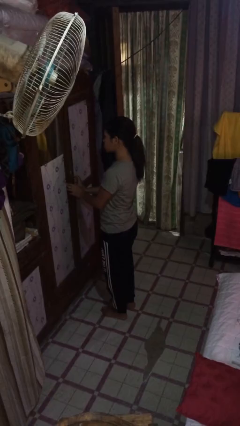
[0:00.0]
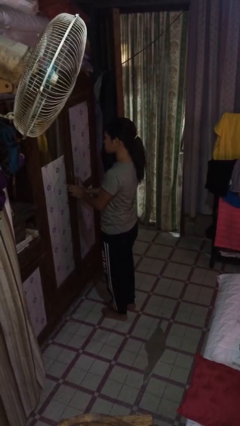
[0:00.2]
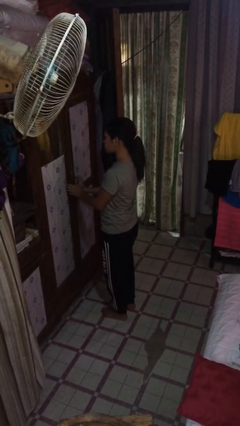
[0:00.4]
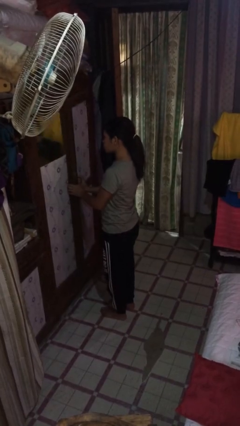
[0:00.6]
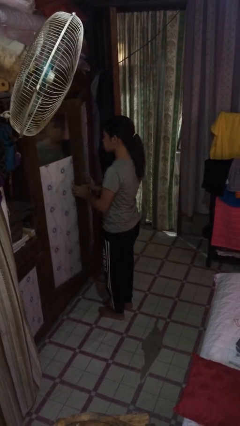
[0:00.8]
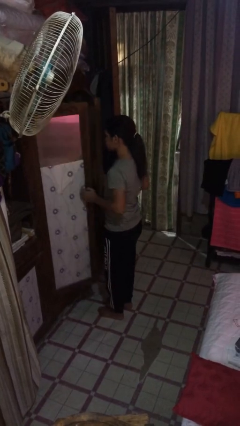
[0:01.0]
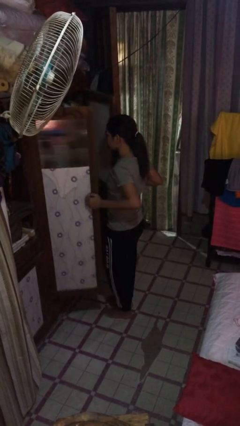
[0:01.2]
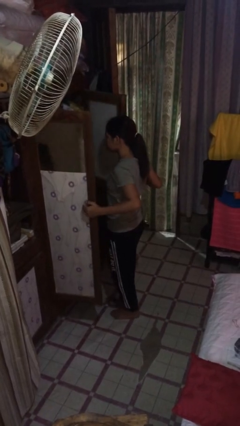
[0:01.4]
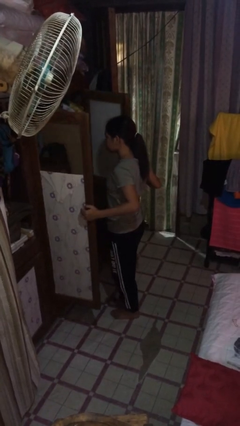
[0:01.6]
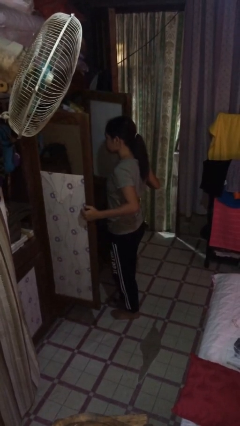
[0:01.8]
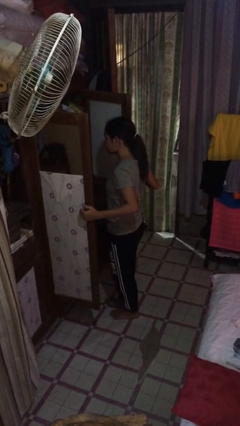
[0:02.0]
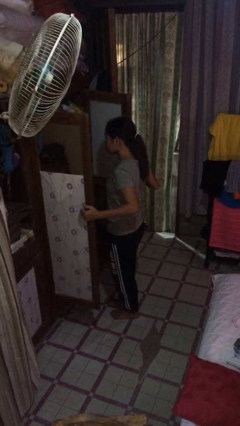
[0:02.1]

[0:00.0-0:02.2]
person opens closet door

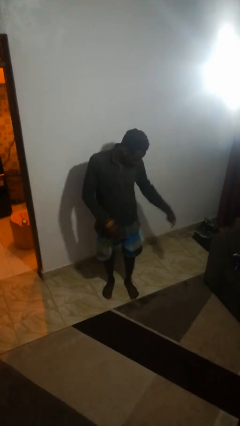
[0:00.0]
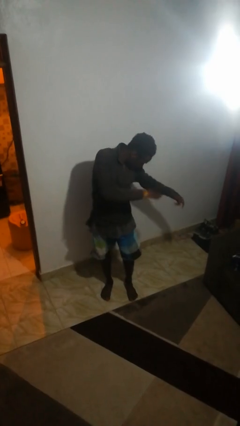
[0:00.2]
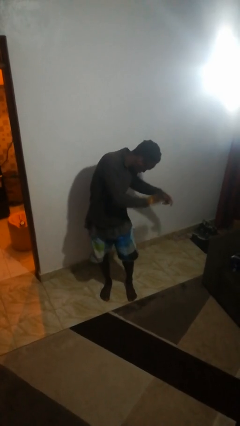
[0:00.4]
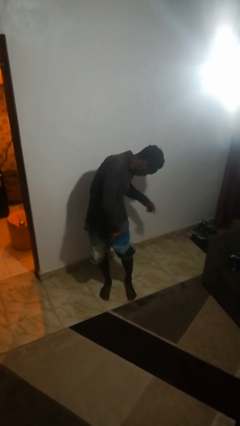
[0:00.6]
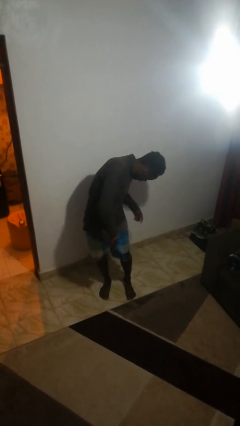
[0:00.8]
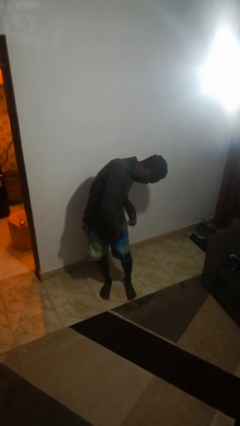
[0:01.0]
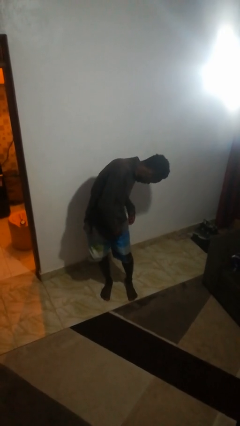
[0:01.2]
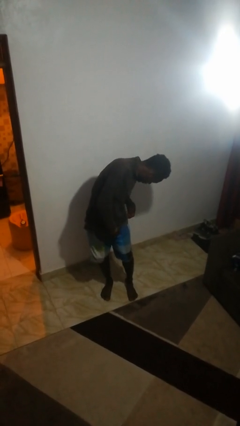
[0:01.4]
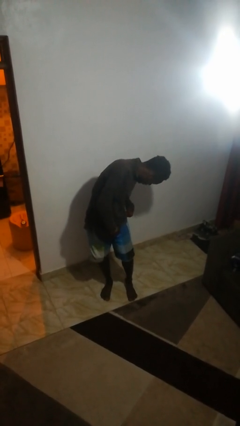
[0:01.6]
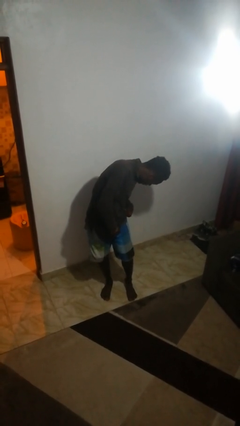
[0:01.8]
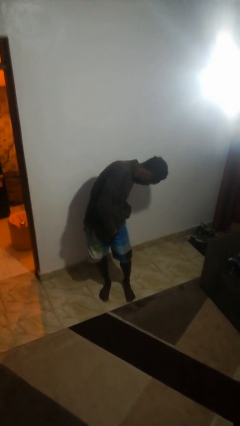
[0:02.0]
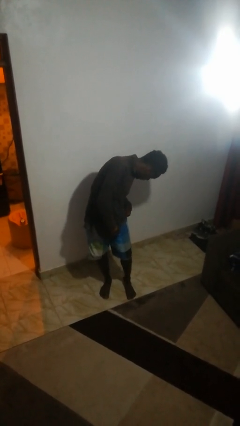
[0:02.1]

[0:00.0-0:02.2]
person swats bug

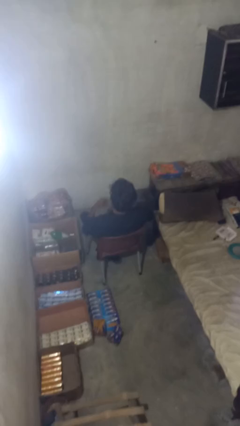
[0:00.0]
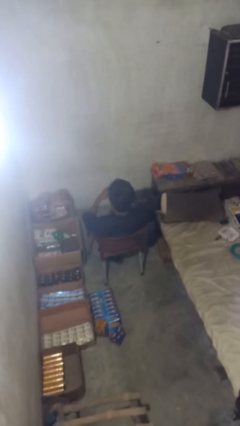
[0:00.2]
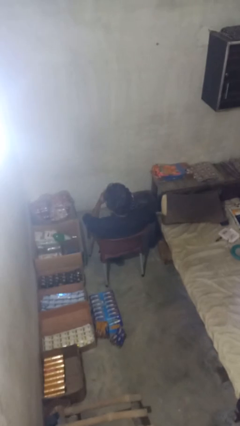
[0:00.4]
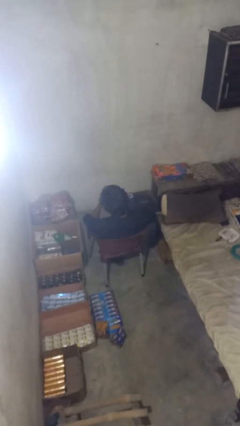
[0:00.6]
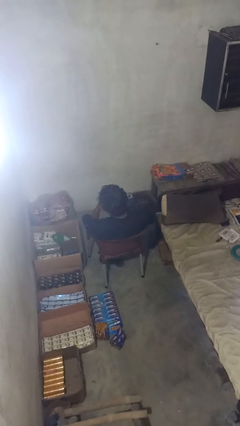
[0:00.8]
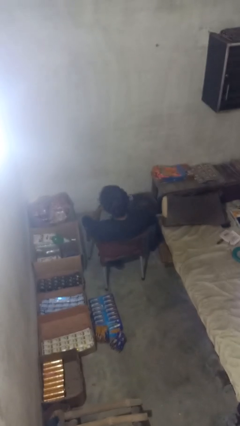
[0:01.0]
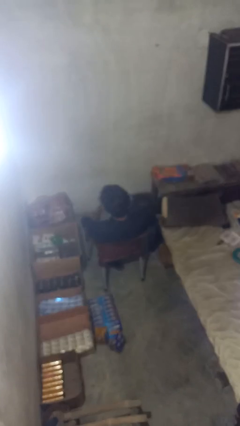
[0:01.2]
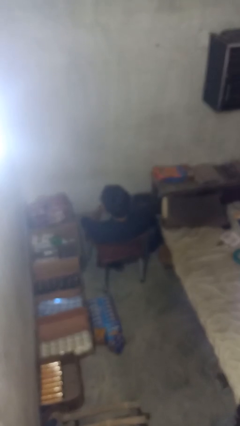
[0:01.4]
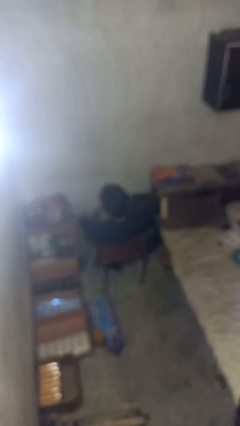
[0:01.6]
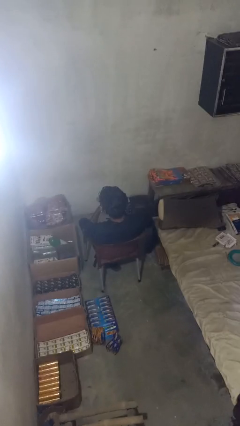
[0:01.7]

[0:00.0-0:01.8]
person licks fingers

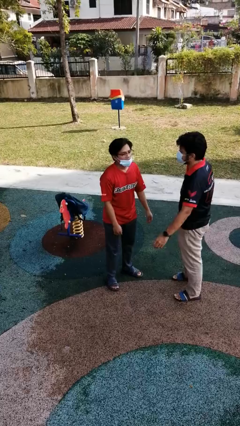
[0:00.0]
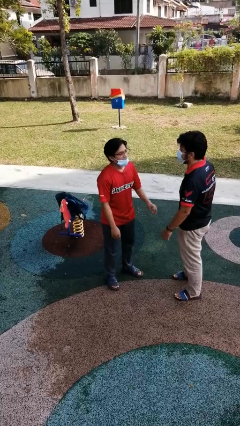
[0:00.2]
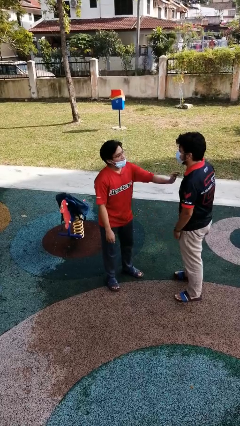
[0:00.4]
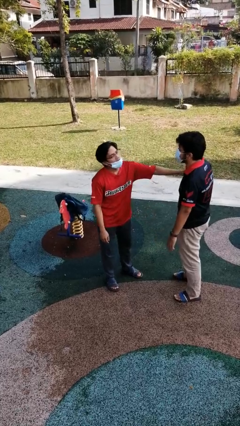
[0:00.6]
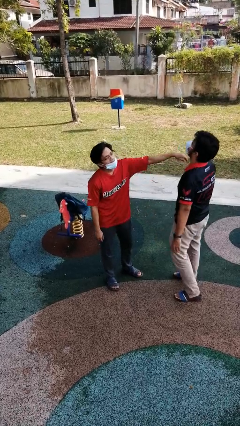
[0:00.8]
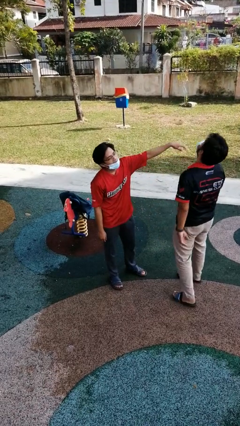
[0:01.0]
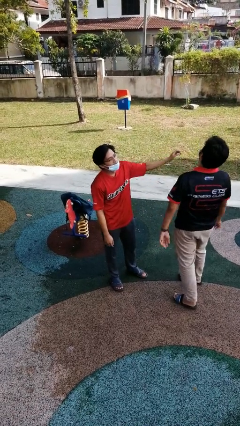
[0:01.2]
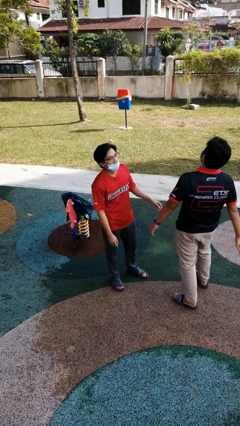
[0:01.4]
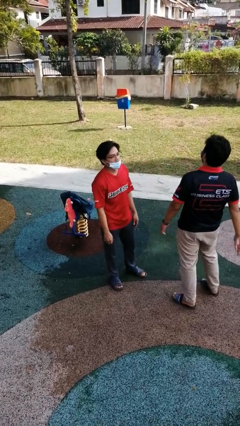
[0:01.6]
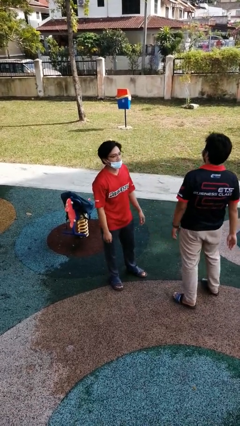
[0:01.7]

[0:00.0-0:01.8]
person shoves person

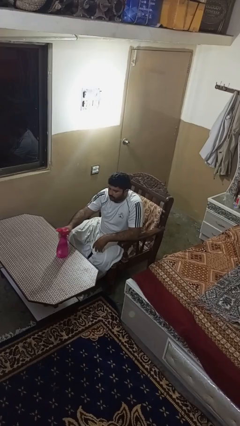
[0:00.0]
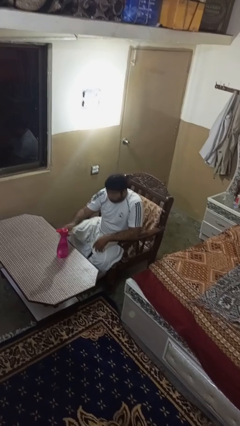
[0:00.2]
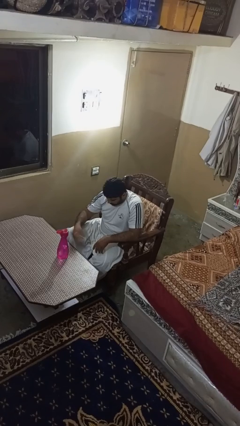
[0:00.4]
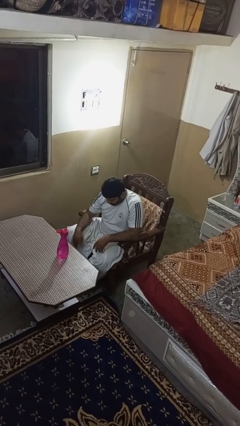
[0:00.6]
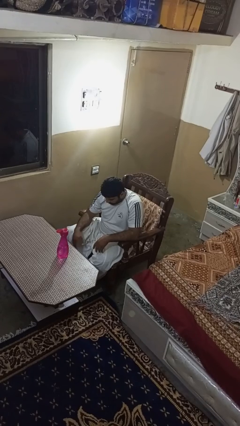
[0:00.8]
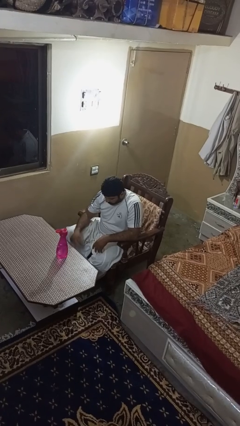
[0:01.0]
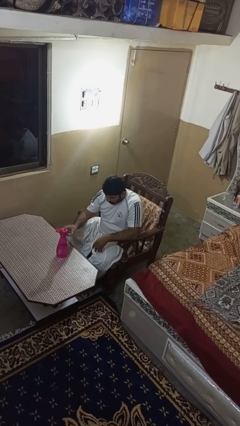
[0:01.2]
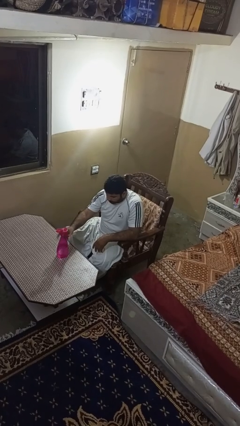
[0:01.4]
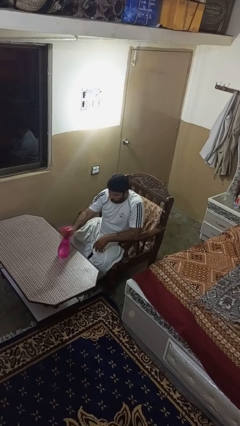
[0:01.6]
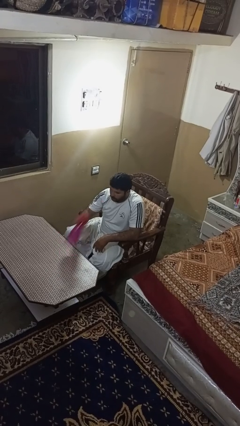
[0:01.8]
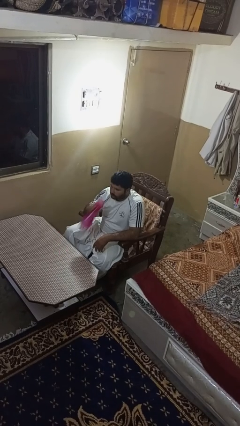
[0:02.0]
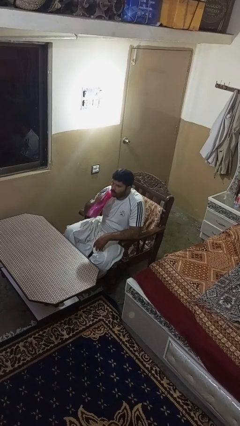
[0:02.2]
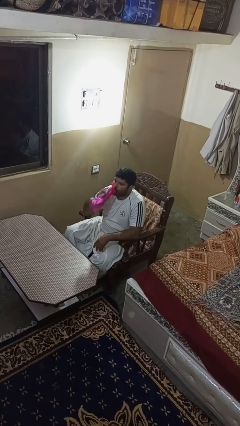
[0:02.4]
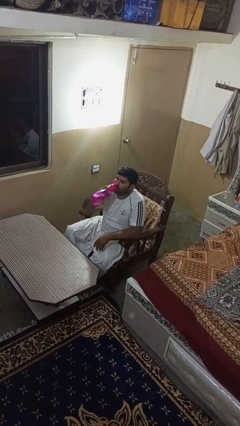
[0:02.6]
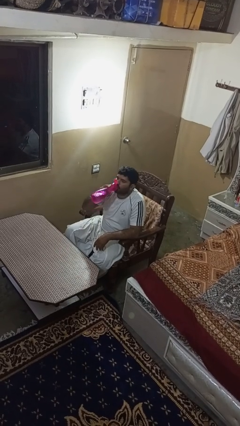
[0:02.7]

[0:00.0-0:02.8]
person drinks from bottle

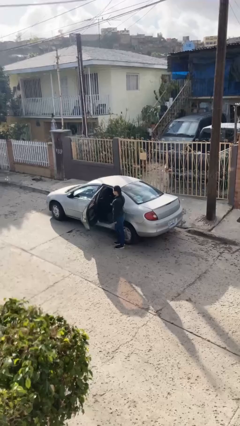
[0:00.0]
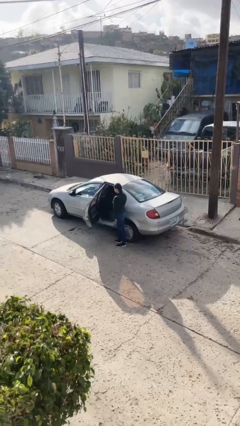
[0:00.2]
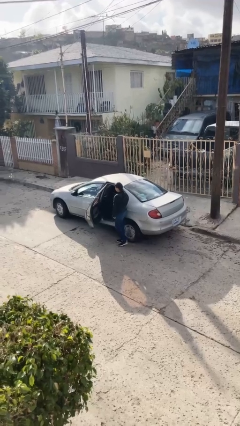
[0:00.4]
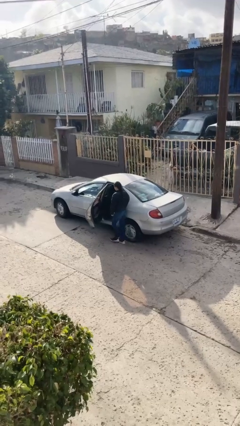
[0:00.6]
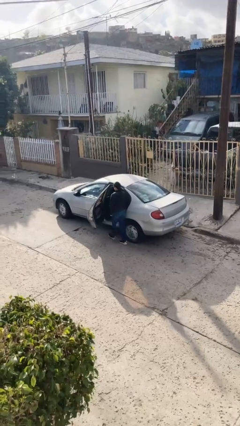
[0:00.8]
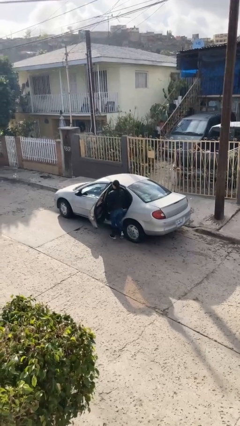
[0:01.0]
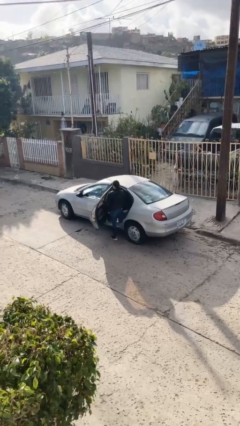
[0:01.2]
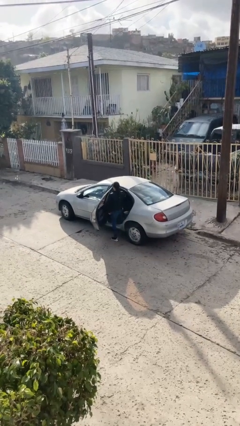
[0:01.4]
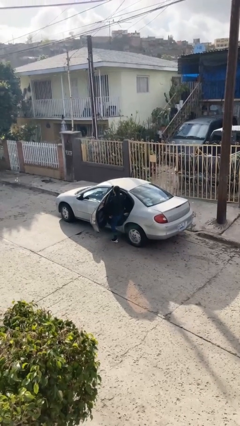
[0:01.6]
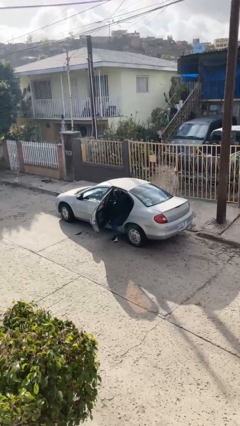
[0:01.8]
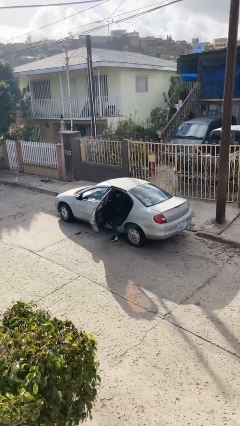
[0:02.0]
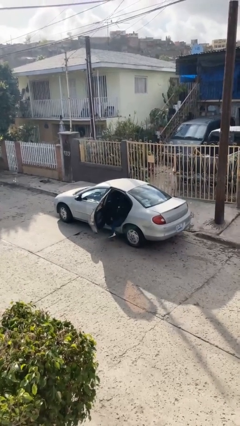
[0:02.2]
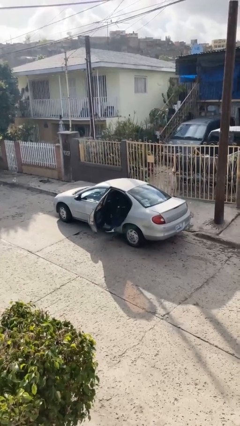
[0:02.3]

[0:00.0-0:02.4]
person enters car

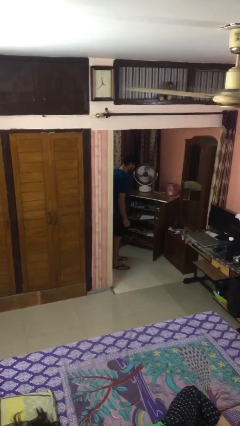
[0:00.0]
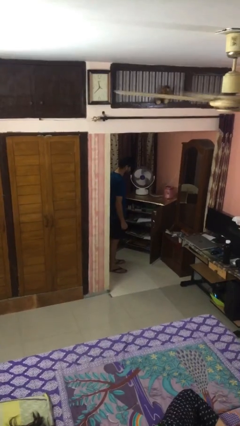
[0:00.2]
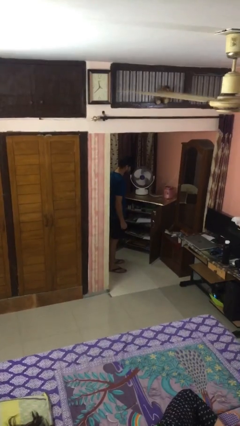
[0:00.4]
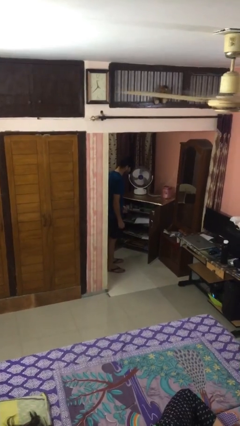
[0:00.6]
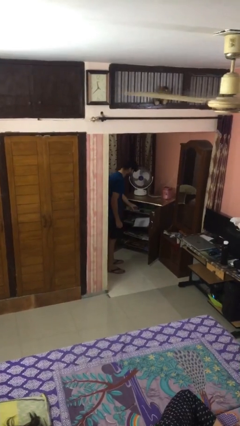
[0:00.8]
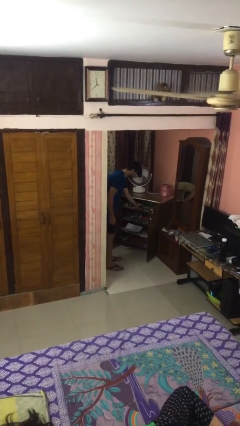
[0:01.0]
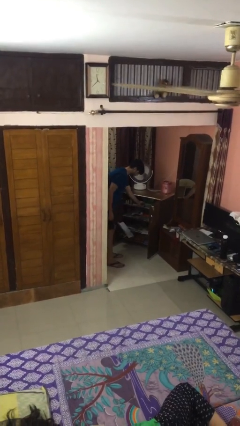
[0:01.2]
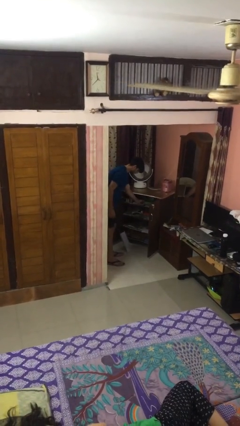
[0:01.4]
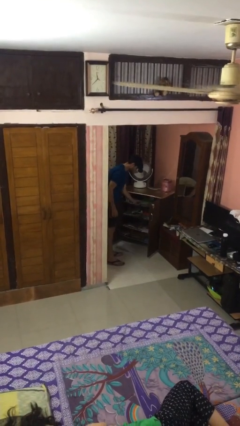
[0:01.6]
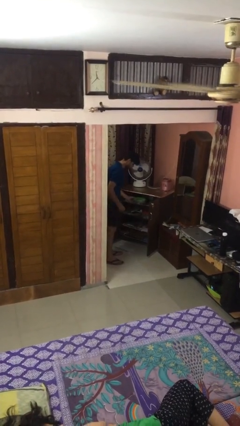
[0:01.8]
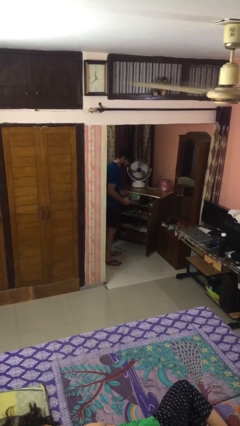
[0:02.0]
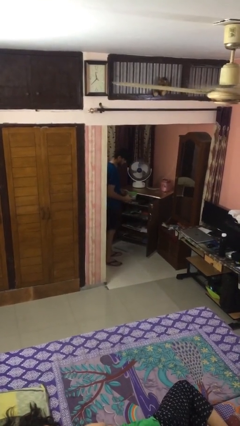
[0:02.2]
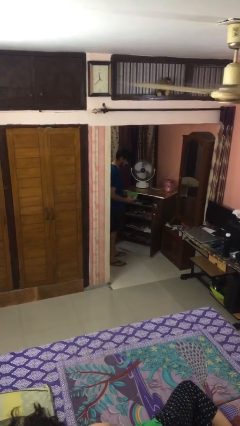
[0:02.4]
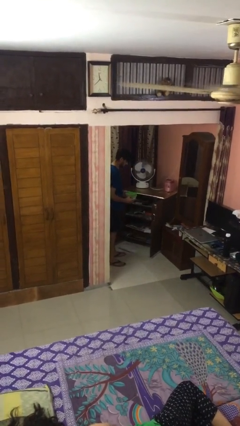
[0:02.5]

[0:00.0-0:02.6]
person picks up object from cabinet

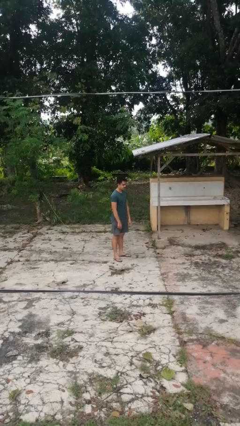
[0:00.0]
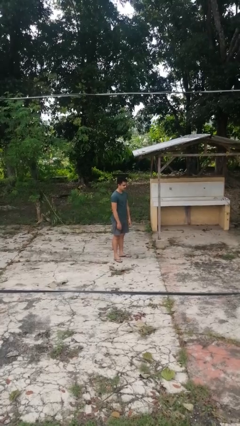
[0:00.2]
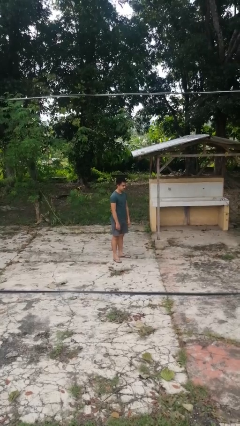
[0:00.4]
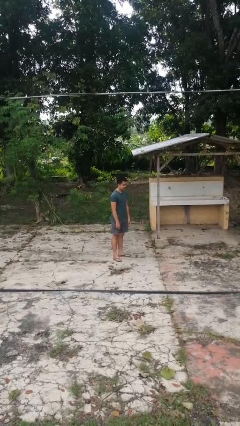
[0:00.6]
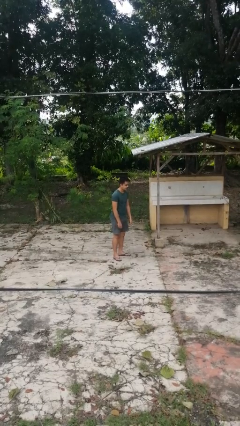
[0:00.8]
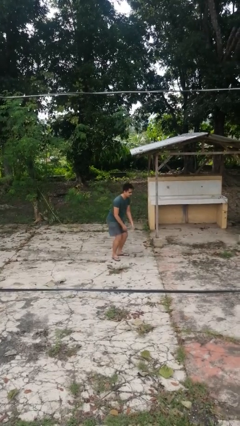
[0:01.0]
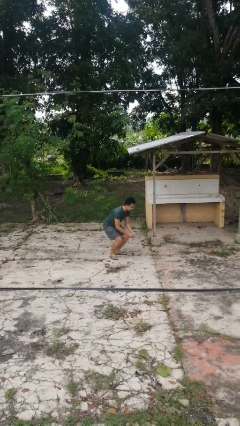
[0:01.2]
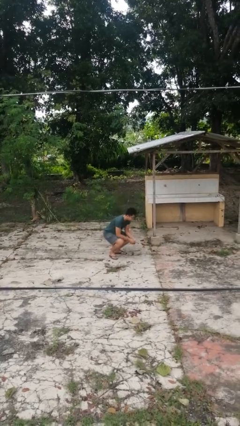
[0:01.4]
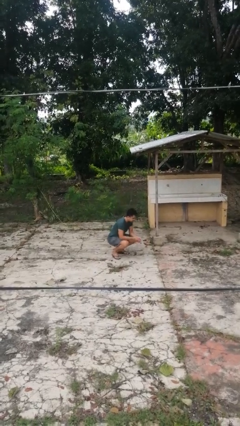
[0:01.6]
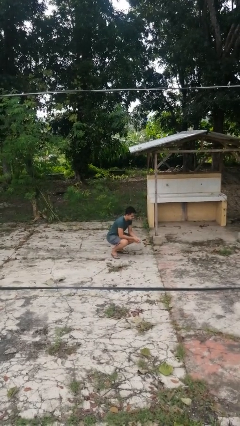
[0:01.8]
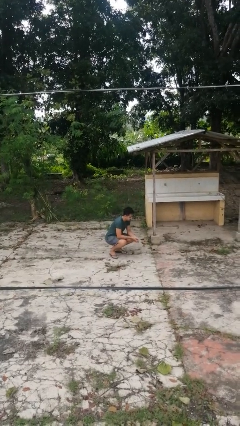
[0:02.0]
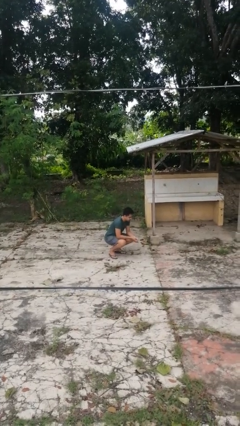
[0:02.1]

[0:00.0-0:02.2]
person squats
